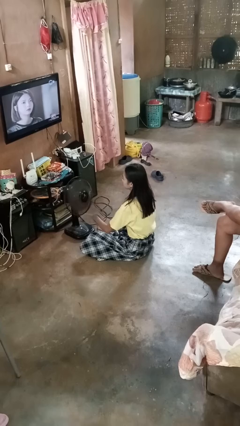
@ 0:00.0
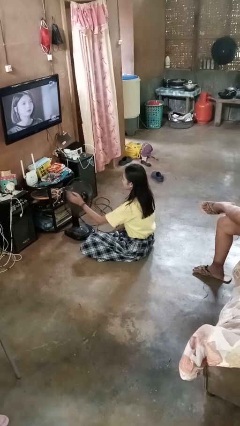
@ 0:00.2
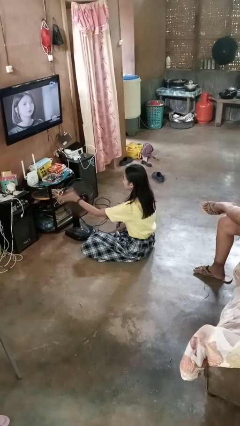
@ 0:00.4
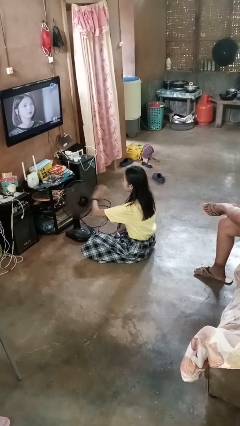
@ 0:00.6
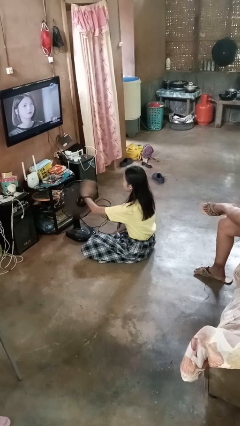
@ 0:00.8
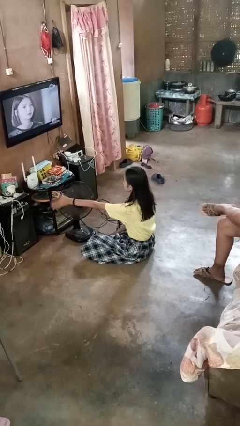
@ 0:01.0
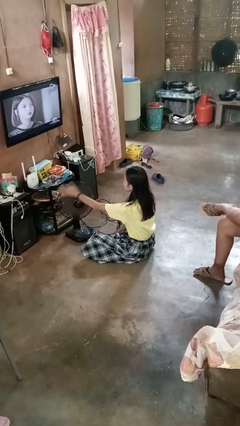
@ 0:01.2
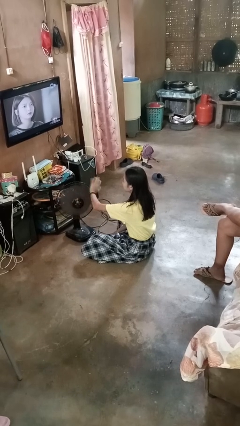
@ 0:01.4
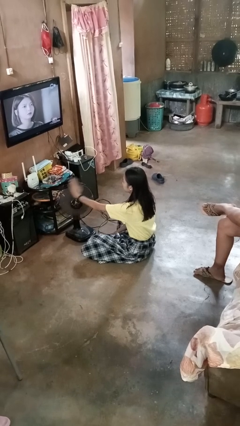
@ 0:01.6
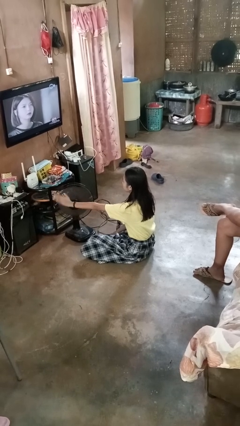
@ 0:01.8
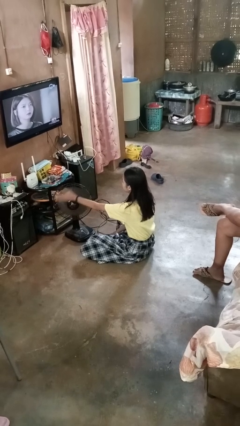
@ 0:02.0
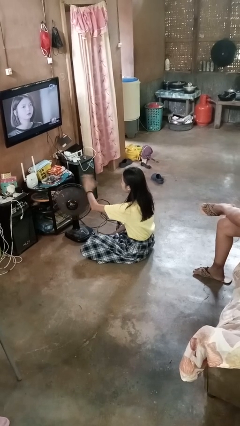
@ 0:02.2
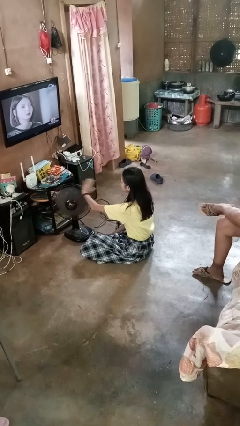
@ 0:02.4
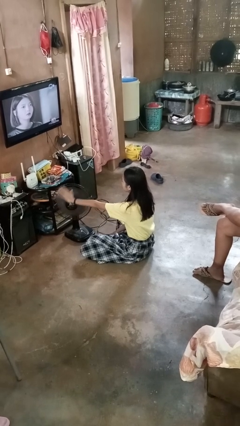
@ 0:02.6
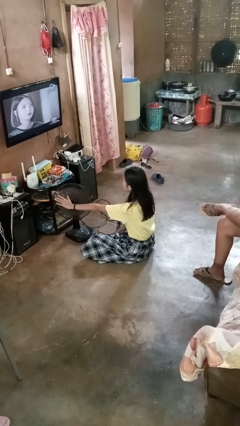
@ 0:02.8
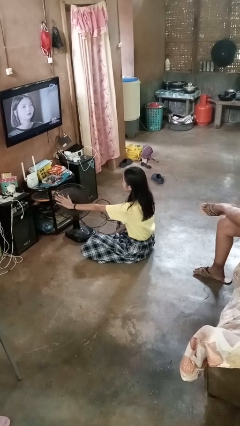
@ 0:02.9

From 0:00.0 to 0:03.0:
person waves hand over object

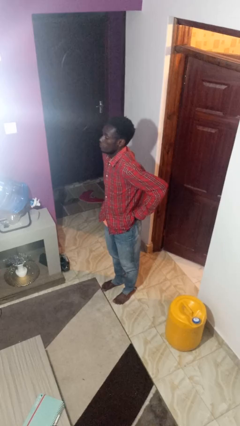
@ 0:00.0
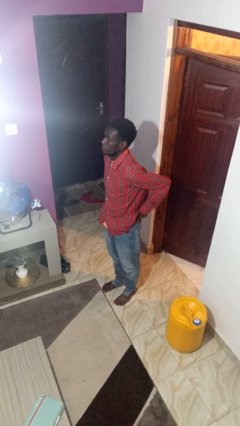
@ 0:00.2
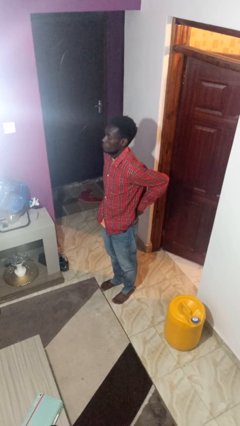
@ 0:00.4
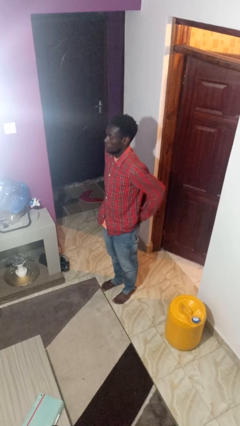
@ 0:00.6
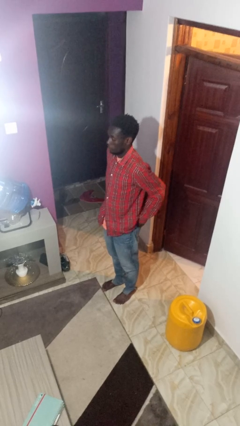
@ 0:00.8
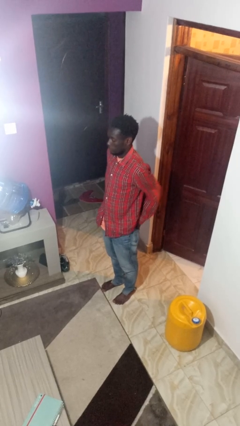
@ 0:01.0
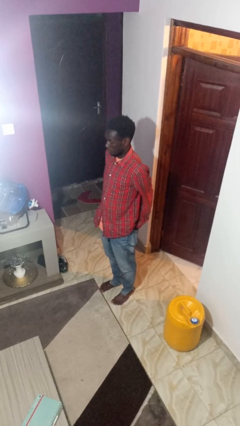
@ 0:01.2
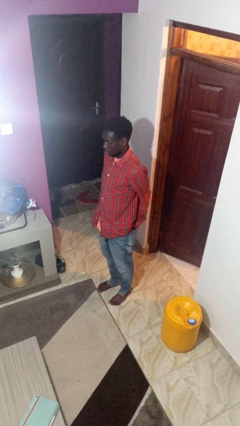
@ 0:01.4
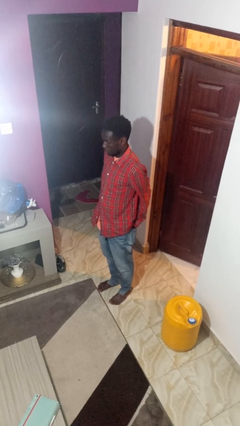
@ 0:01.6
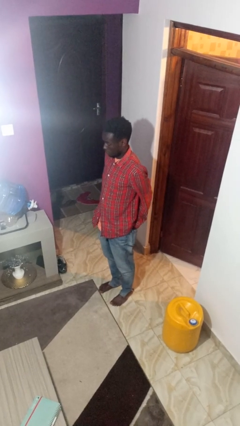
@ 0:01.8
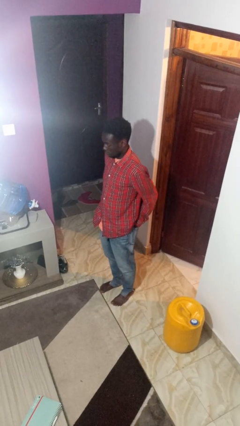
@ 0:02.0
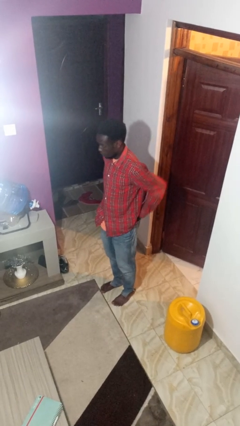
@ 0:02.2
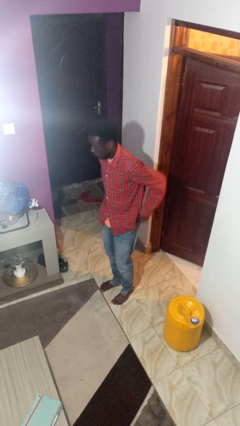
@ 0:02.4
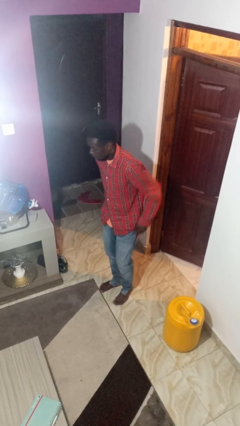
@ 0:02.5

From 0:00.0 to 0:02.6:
person puts hands in back pockets

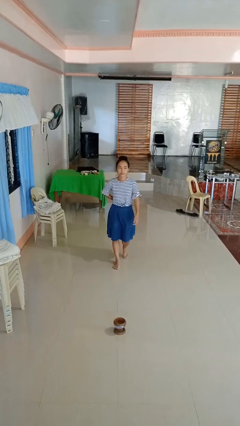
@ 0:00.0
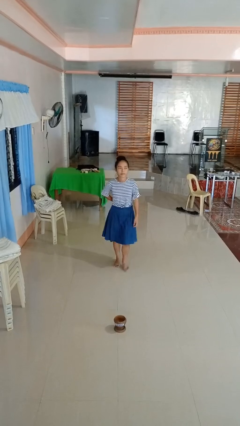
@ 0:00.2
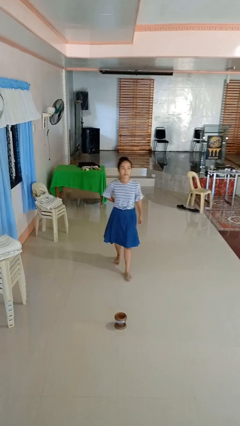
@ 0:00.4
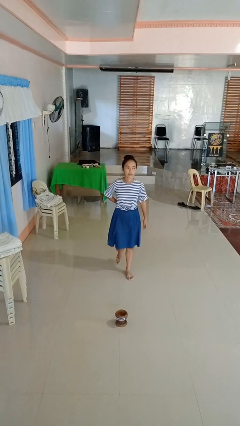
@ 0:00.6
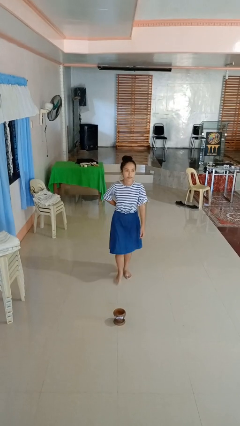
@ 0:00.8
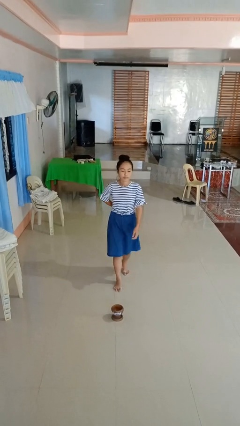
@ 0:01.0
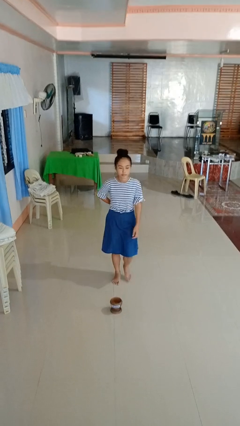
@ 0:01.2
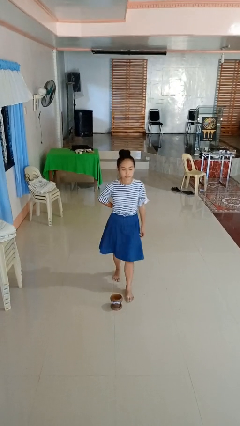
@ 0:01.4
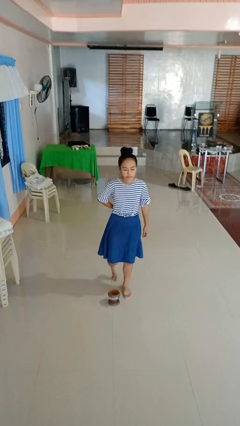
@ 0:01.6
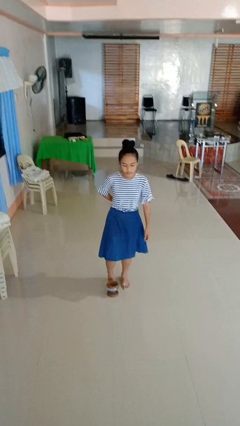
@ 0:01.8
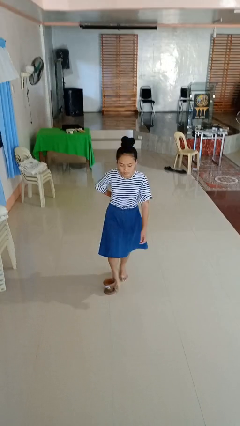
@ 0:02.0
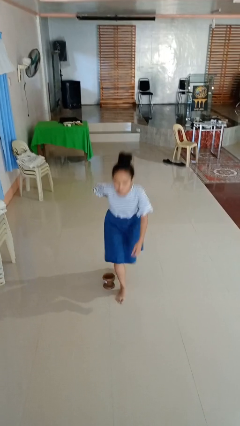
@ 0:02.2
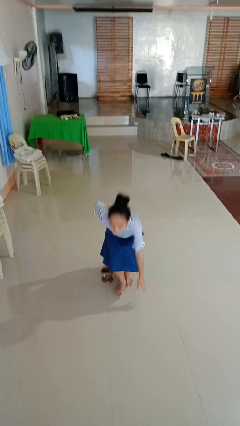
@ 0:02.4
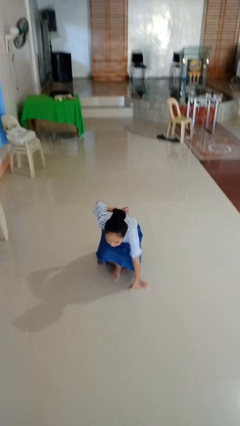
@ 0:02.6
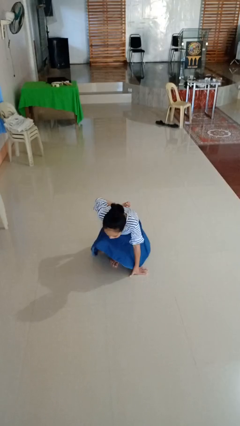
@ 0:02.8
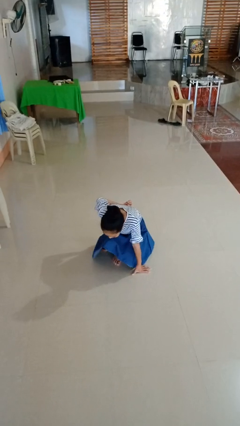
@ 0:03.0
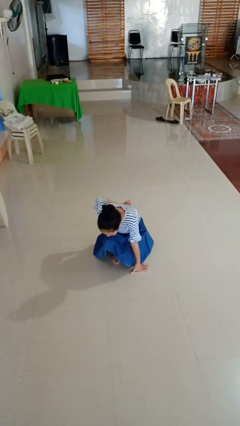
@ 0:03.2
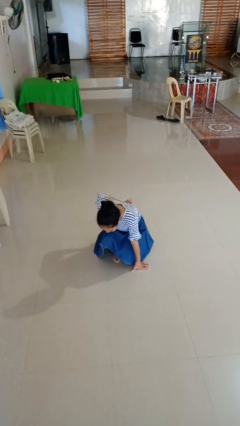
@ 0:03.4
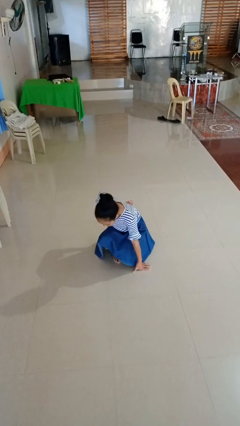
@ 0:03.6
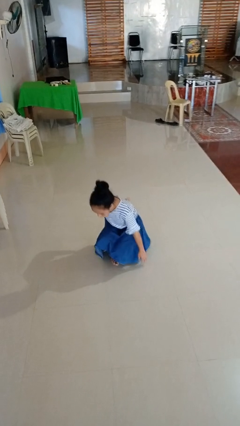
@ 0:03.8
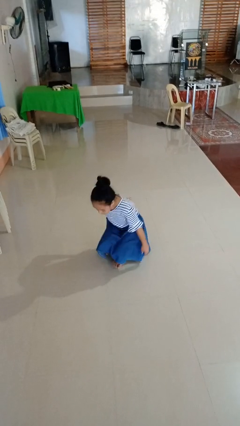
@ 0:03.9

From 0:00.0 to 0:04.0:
person trips on object on floor

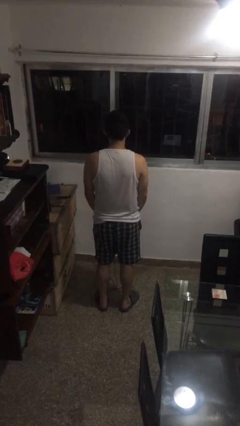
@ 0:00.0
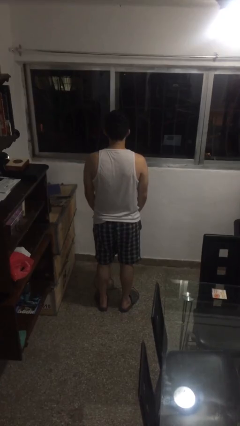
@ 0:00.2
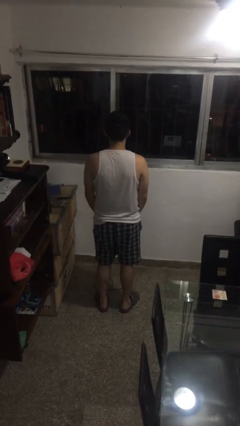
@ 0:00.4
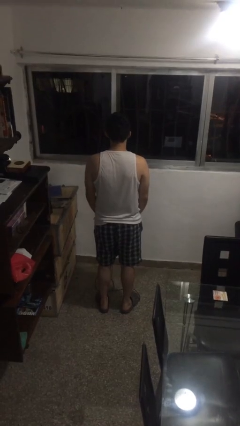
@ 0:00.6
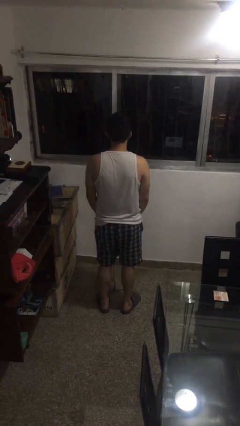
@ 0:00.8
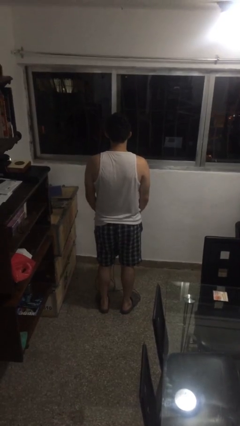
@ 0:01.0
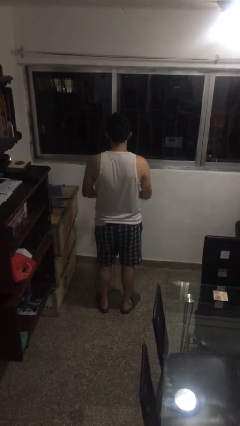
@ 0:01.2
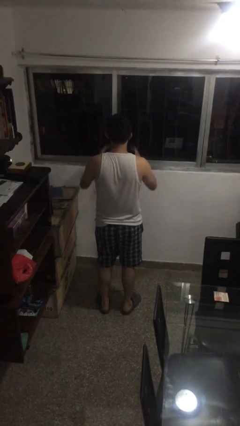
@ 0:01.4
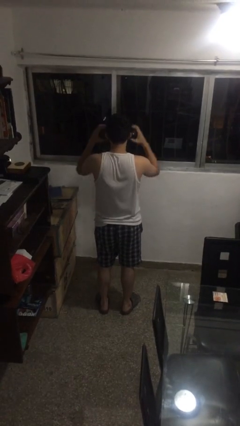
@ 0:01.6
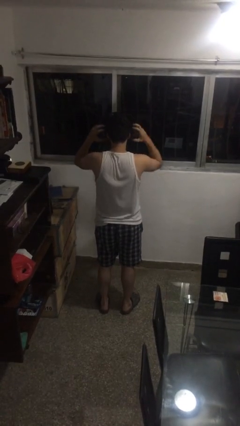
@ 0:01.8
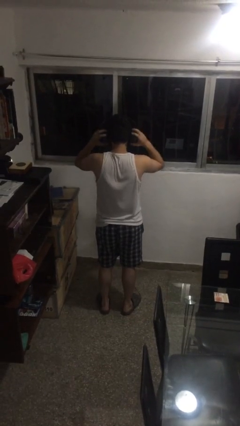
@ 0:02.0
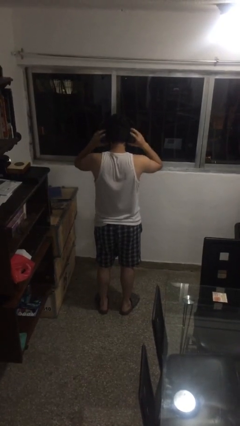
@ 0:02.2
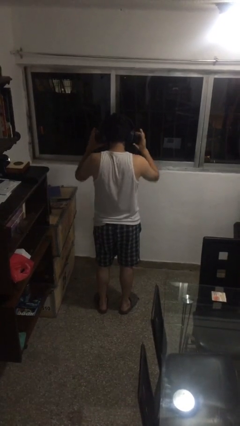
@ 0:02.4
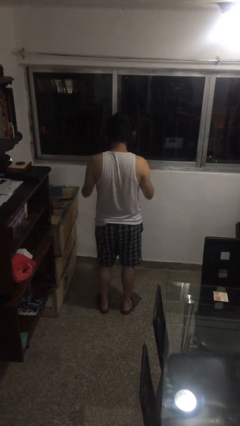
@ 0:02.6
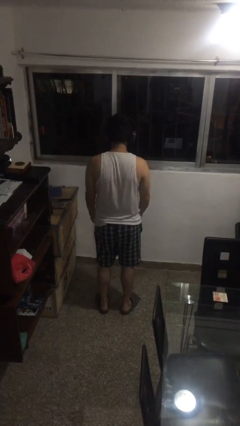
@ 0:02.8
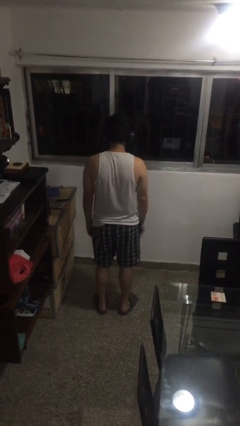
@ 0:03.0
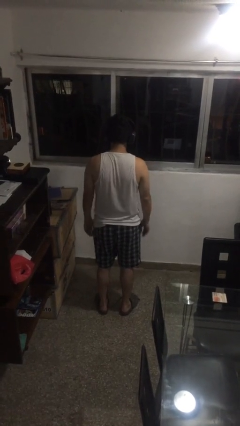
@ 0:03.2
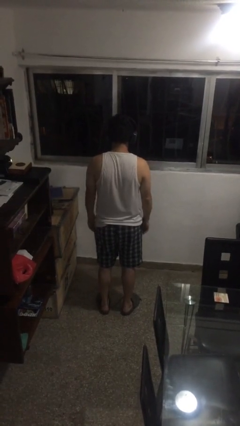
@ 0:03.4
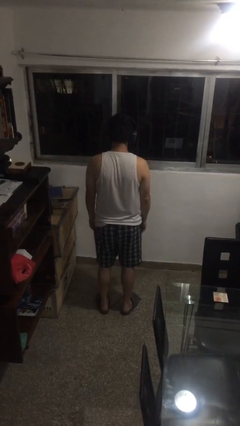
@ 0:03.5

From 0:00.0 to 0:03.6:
person puts on headphones

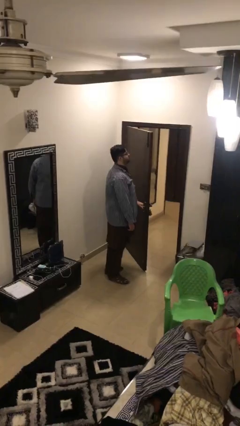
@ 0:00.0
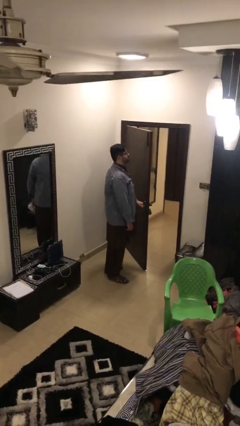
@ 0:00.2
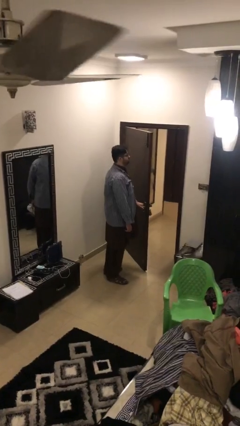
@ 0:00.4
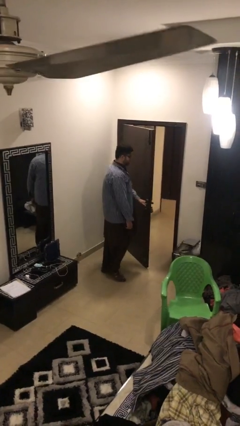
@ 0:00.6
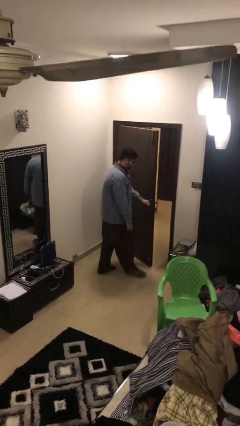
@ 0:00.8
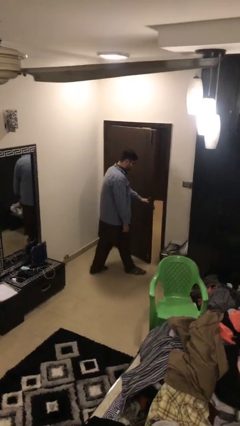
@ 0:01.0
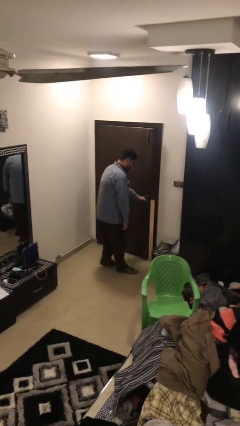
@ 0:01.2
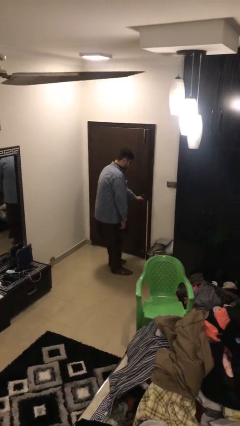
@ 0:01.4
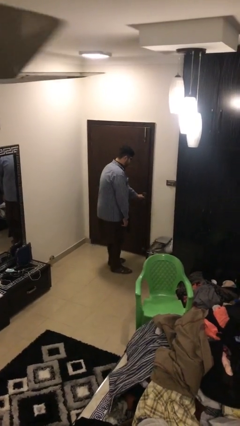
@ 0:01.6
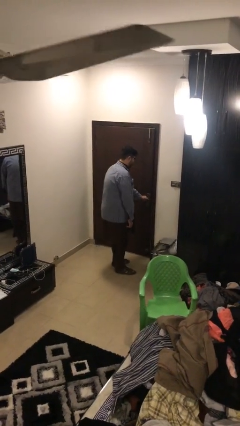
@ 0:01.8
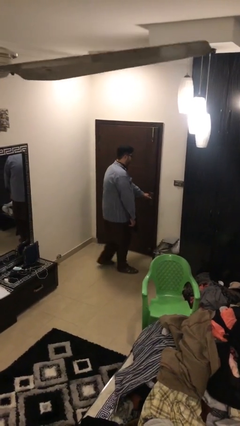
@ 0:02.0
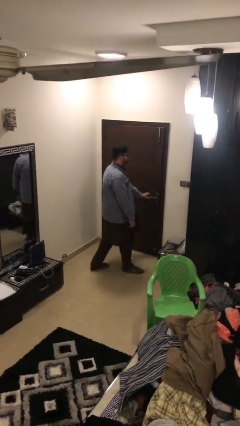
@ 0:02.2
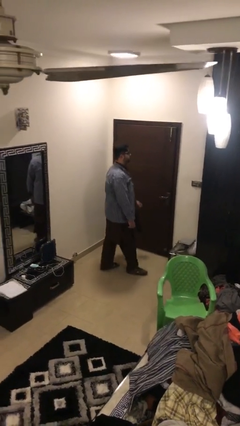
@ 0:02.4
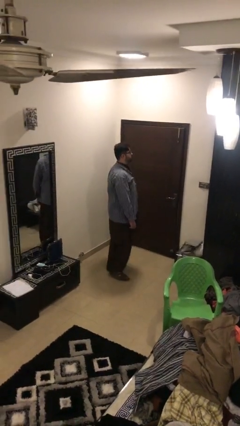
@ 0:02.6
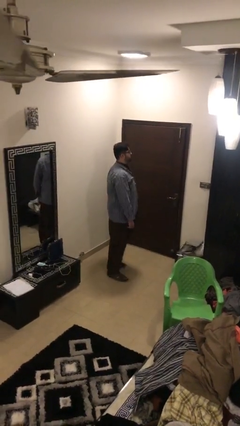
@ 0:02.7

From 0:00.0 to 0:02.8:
person closes facility door

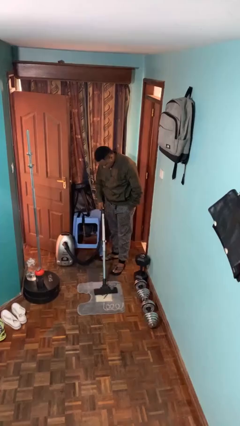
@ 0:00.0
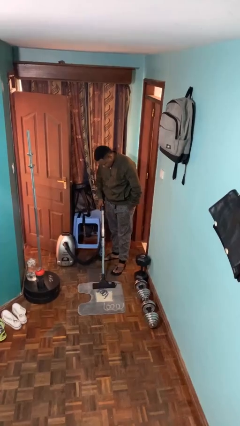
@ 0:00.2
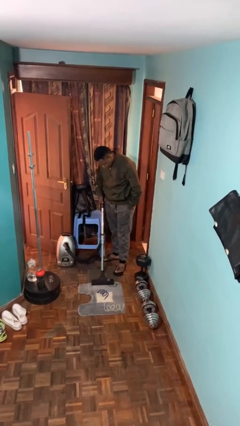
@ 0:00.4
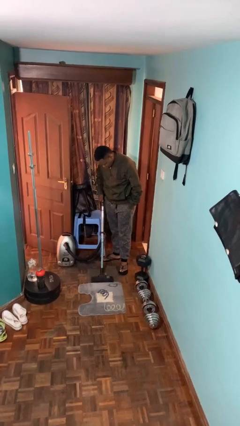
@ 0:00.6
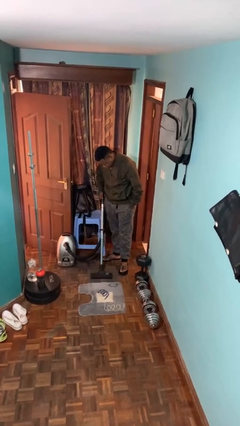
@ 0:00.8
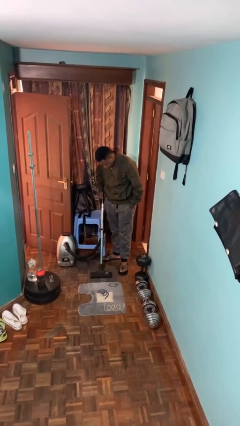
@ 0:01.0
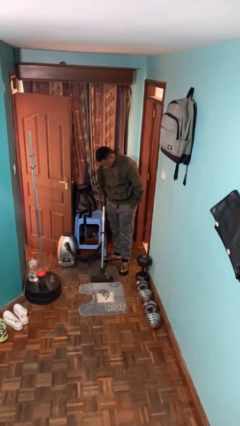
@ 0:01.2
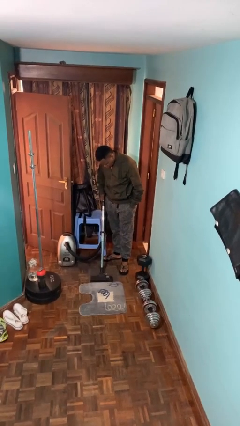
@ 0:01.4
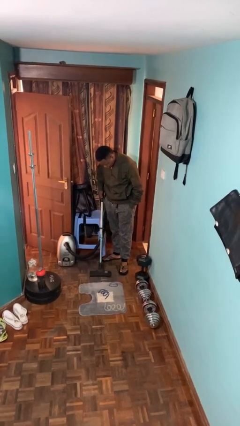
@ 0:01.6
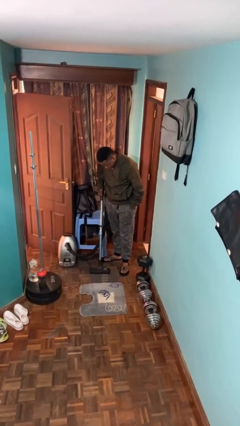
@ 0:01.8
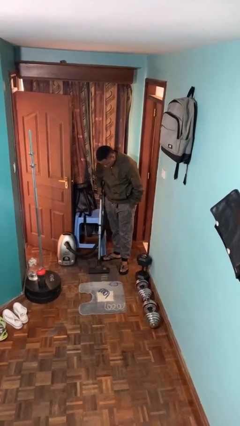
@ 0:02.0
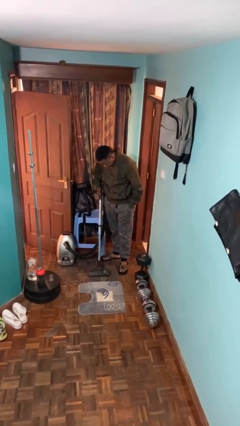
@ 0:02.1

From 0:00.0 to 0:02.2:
person vacuums carpet
